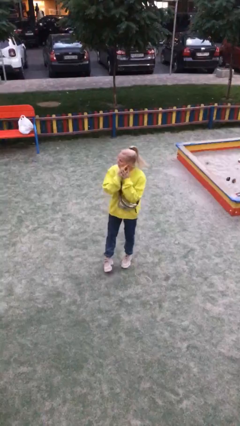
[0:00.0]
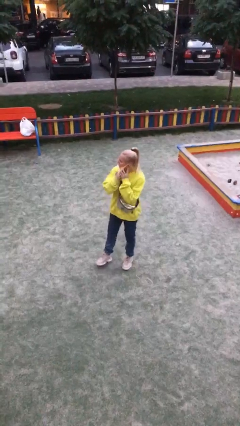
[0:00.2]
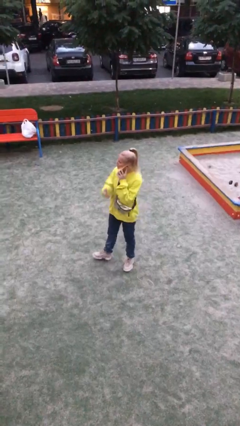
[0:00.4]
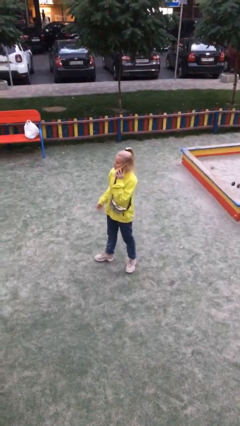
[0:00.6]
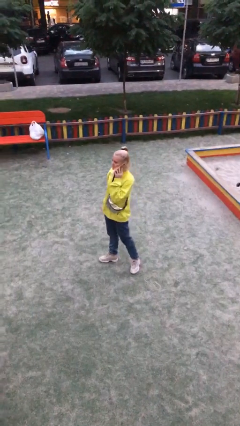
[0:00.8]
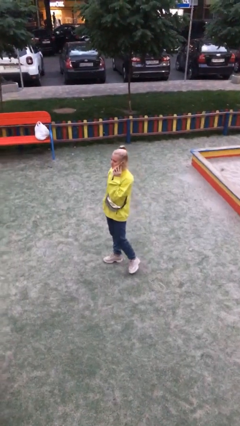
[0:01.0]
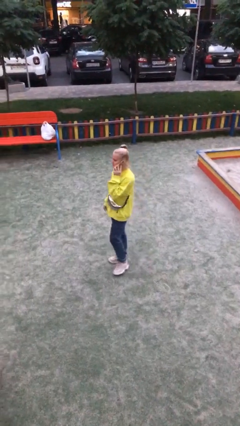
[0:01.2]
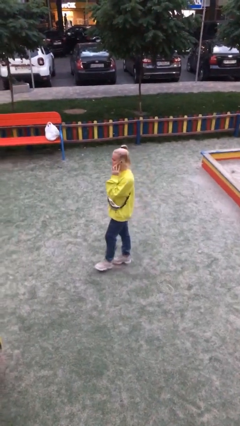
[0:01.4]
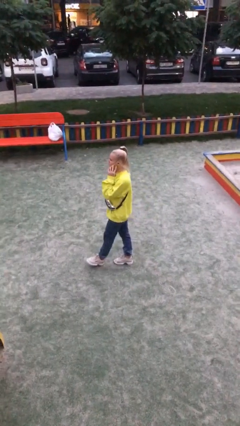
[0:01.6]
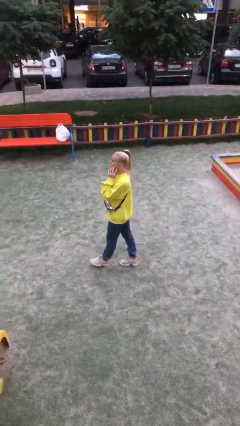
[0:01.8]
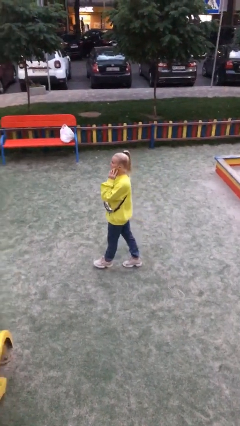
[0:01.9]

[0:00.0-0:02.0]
person talks on phone

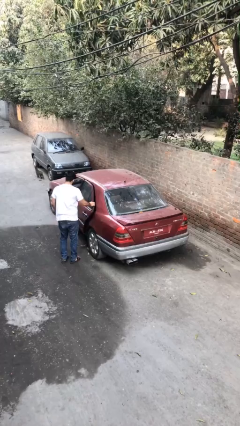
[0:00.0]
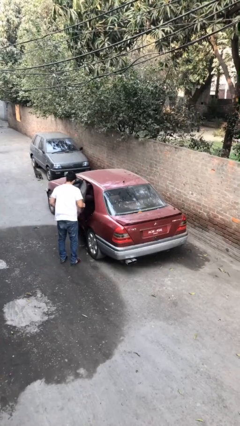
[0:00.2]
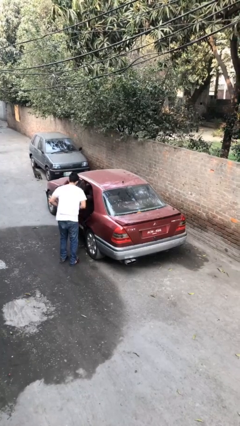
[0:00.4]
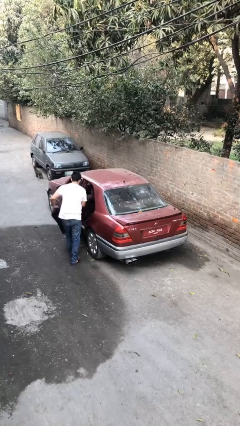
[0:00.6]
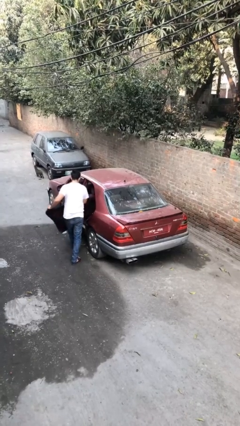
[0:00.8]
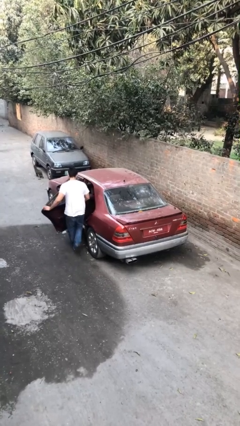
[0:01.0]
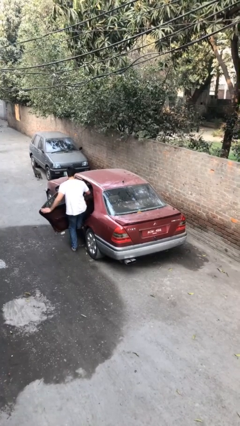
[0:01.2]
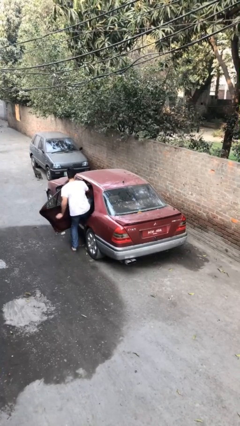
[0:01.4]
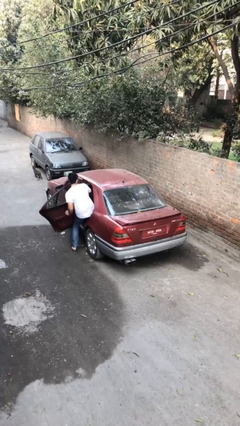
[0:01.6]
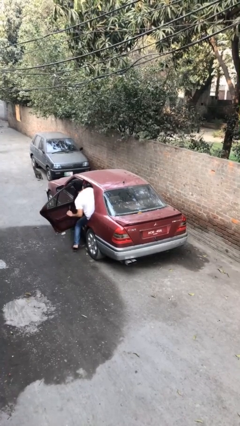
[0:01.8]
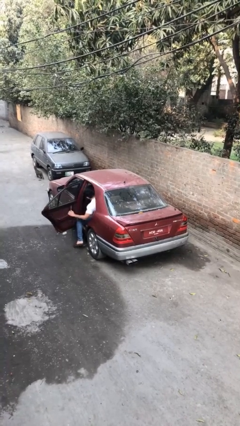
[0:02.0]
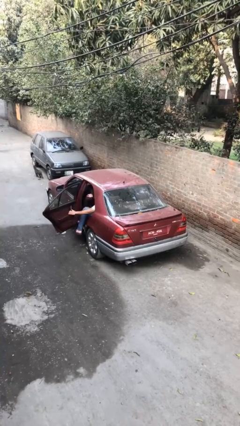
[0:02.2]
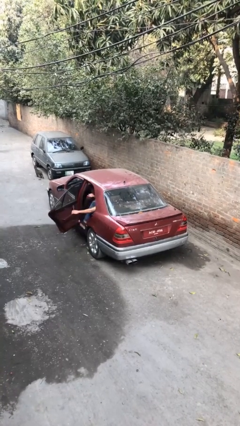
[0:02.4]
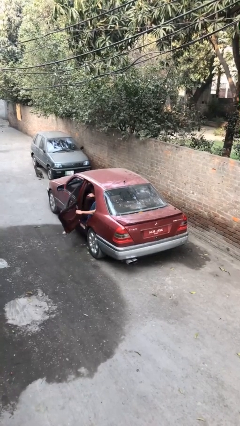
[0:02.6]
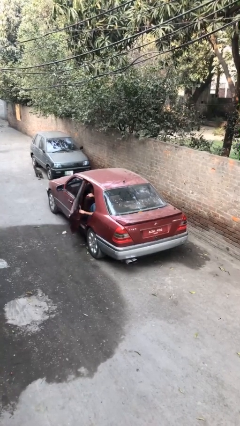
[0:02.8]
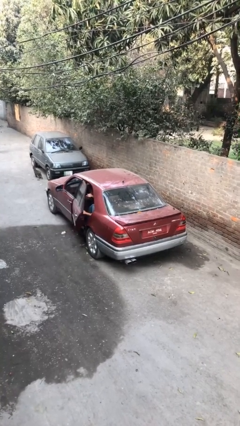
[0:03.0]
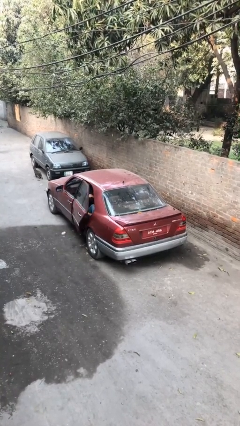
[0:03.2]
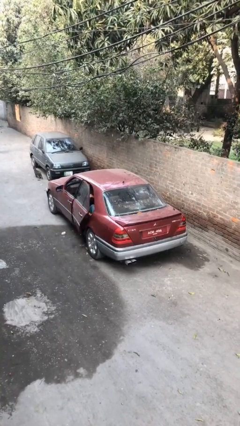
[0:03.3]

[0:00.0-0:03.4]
car picks up person

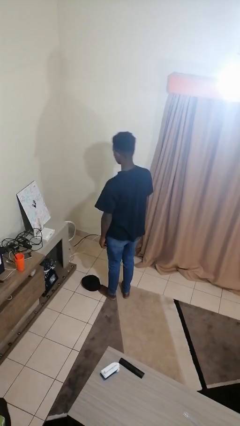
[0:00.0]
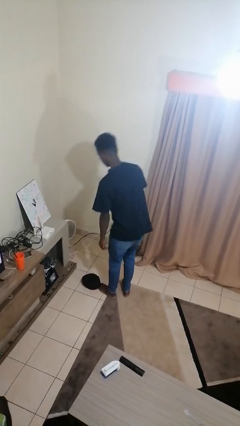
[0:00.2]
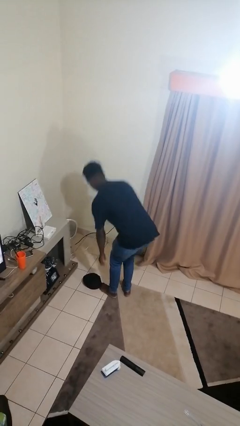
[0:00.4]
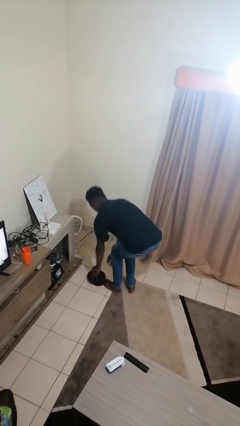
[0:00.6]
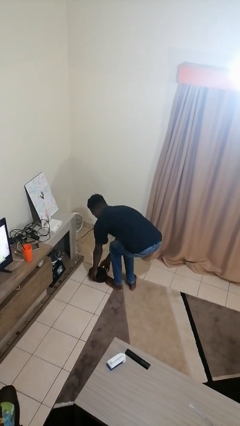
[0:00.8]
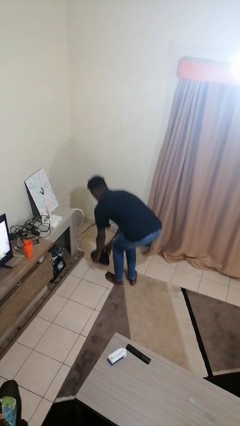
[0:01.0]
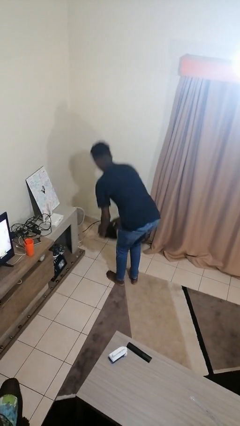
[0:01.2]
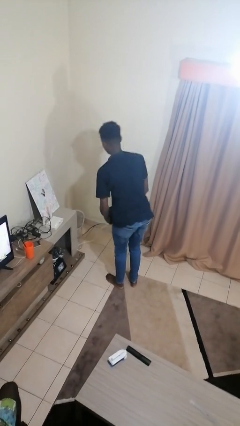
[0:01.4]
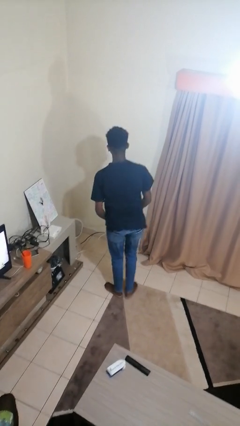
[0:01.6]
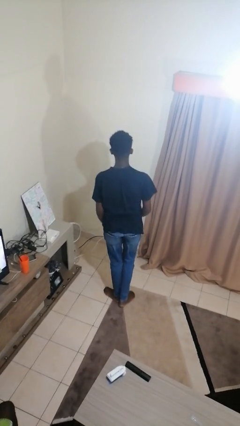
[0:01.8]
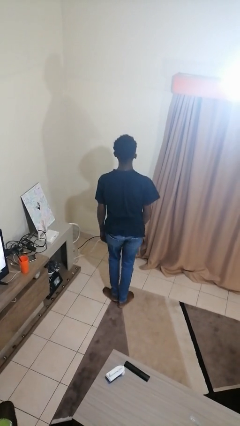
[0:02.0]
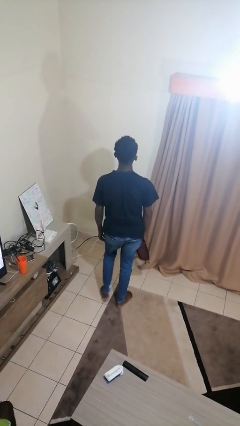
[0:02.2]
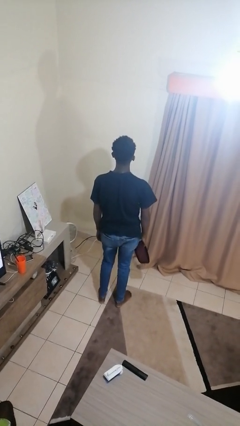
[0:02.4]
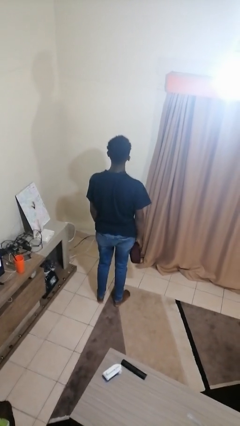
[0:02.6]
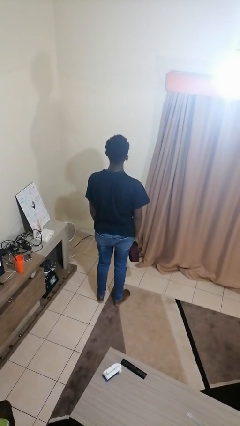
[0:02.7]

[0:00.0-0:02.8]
person picks up object from floor

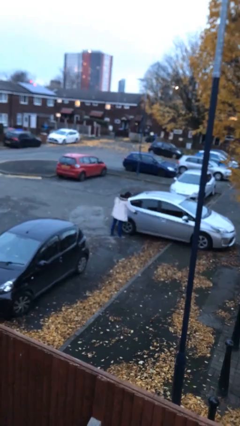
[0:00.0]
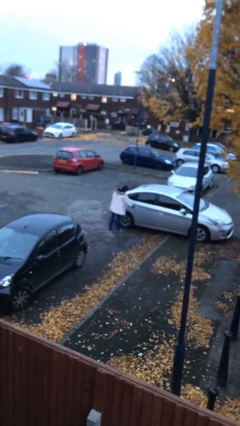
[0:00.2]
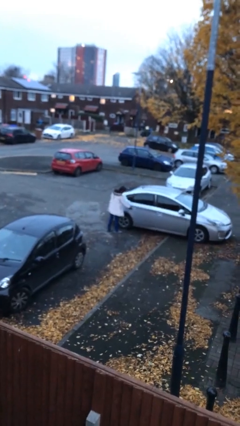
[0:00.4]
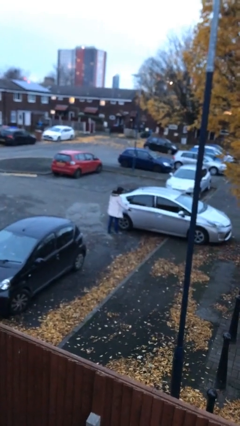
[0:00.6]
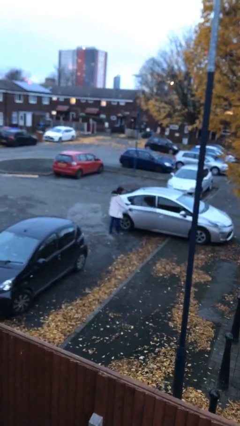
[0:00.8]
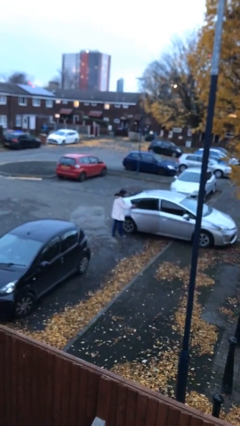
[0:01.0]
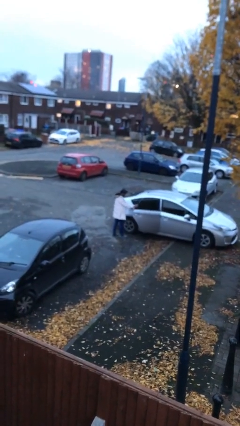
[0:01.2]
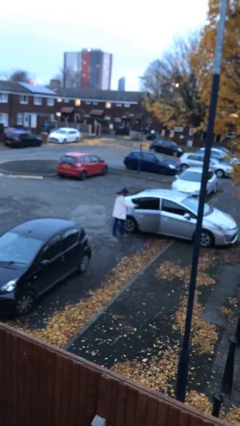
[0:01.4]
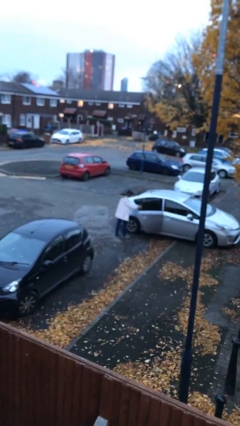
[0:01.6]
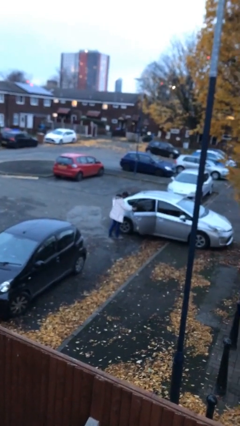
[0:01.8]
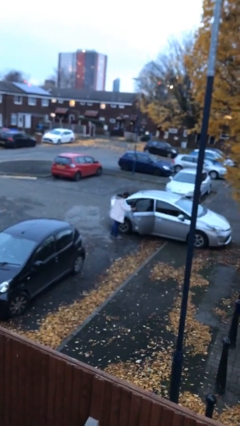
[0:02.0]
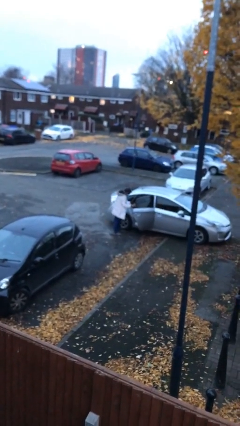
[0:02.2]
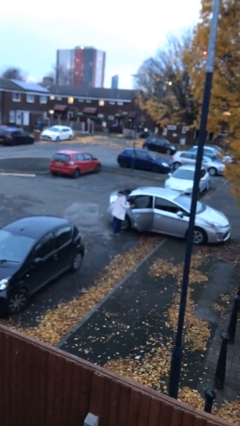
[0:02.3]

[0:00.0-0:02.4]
person opens car door

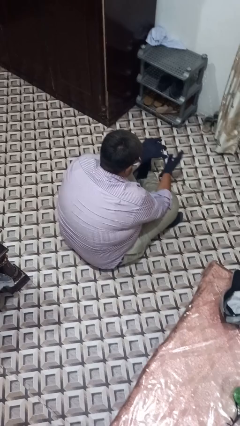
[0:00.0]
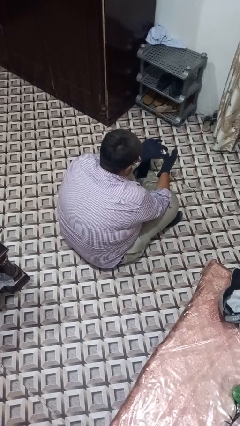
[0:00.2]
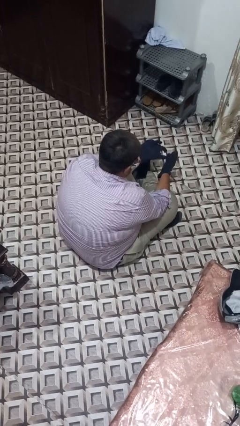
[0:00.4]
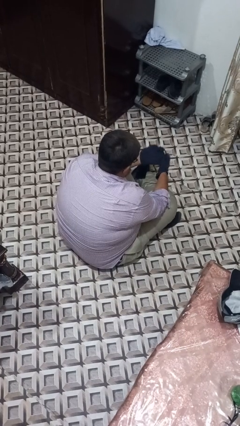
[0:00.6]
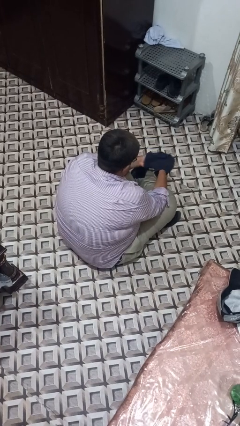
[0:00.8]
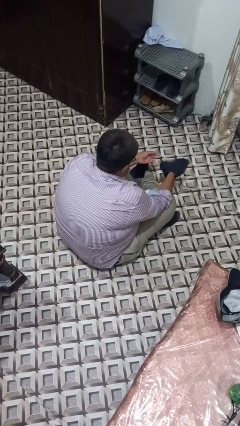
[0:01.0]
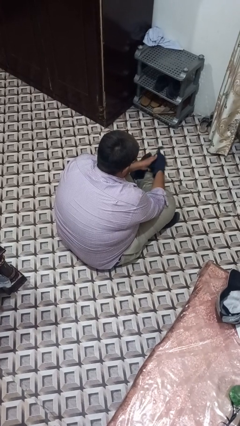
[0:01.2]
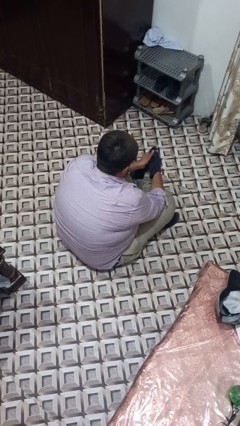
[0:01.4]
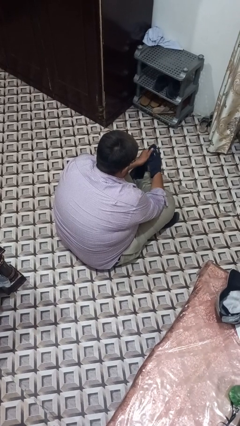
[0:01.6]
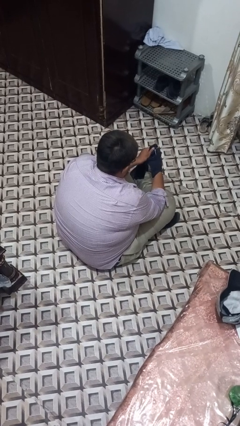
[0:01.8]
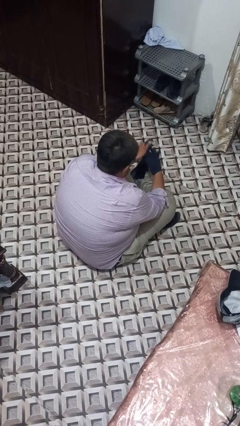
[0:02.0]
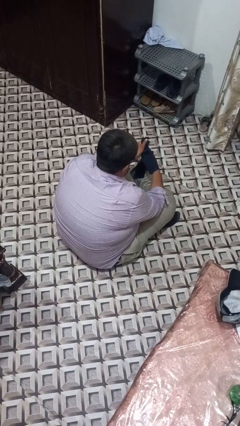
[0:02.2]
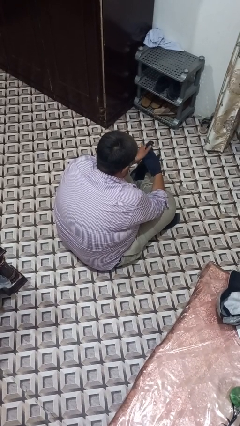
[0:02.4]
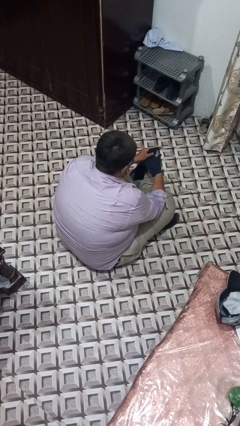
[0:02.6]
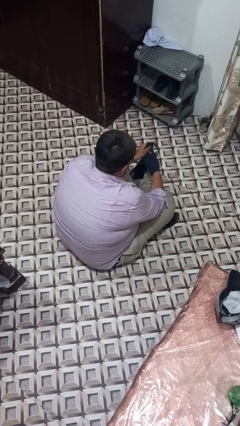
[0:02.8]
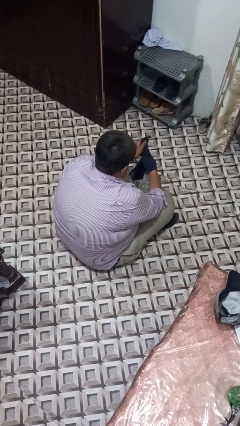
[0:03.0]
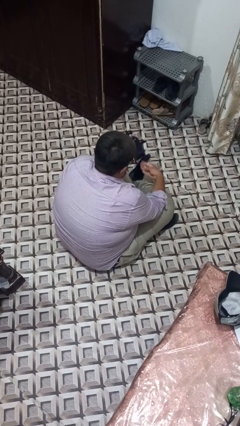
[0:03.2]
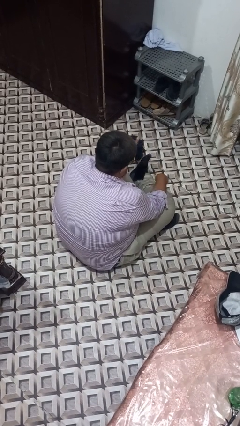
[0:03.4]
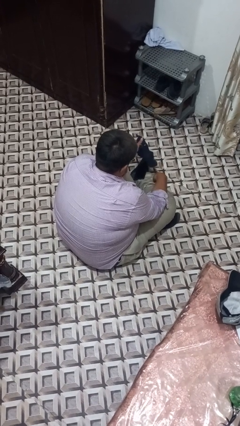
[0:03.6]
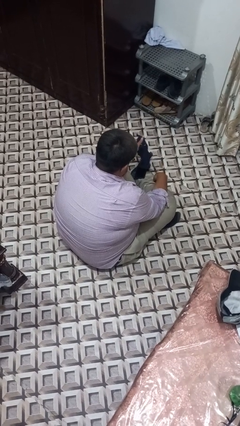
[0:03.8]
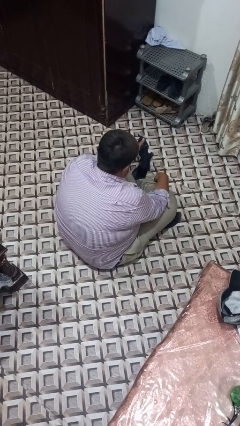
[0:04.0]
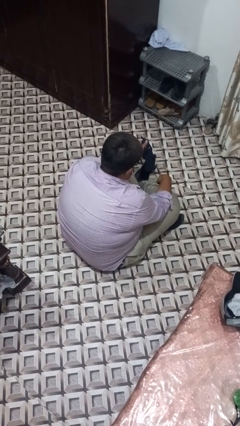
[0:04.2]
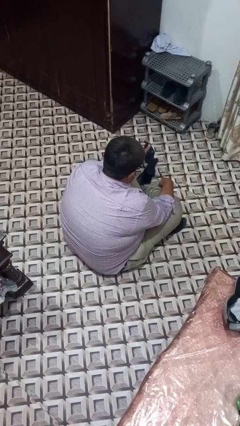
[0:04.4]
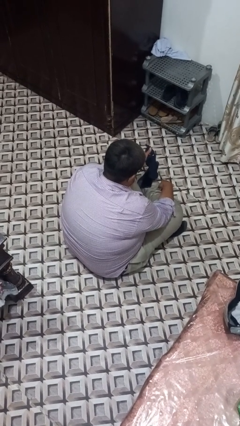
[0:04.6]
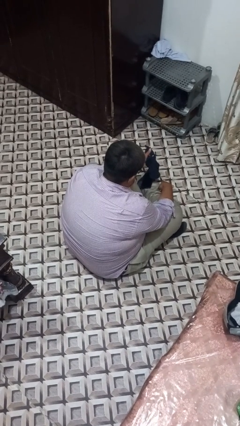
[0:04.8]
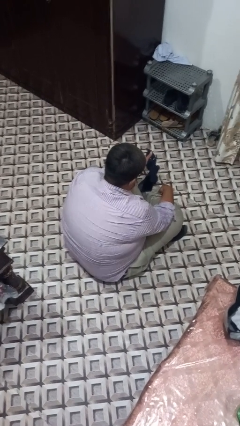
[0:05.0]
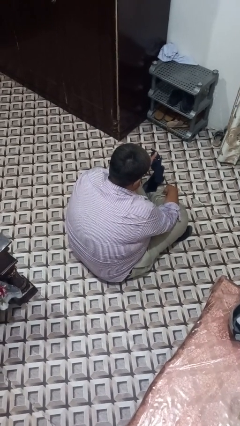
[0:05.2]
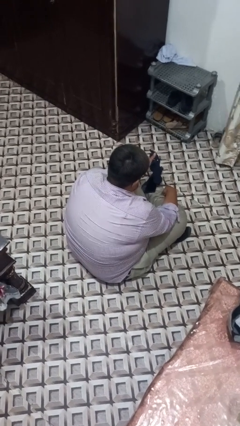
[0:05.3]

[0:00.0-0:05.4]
person takes off gloves

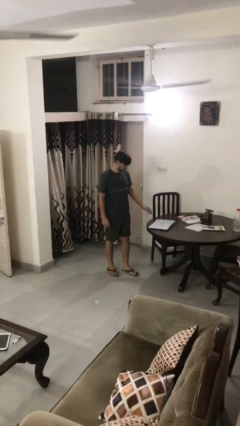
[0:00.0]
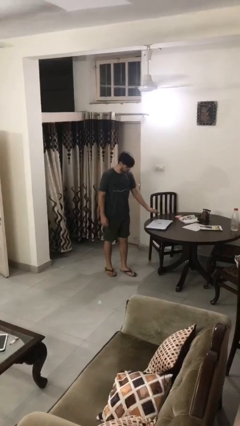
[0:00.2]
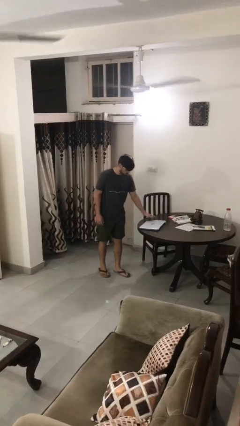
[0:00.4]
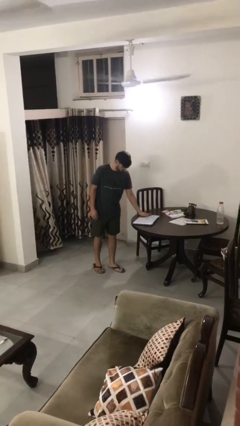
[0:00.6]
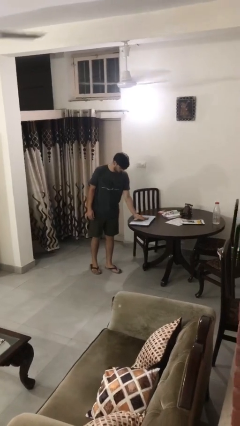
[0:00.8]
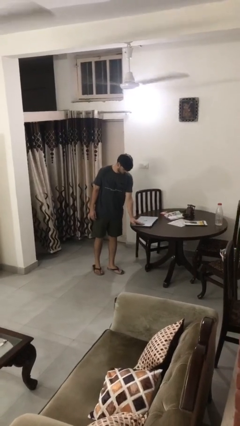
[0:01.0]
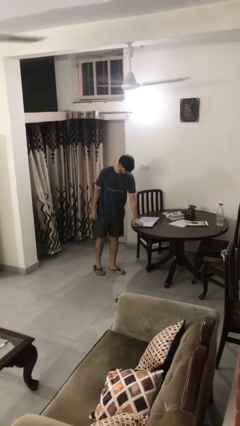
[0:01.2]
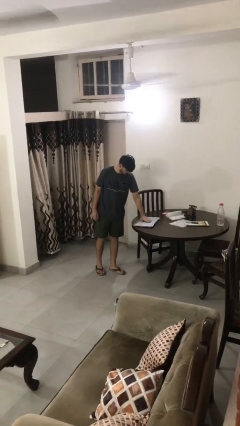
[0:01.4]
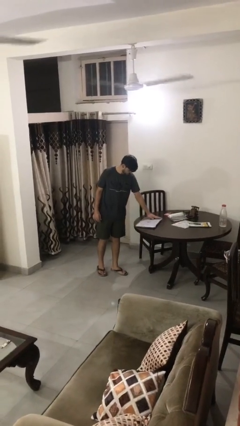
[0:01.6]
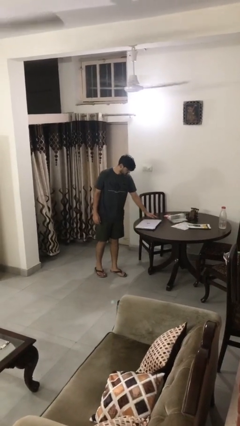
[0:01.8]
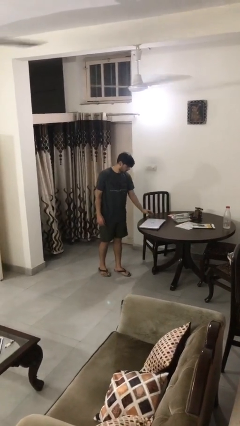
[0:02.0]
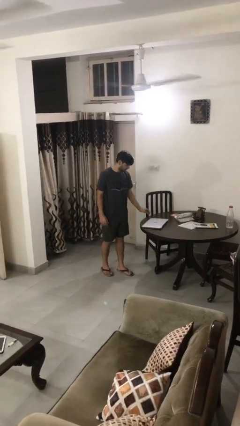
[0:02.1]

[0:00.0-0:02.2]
person waves hand over object
